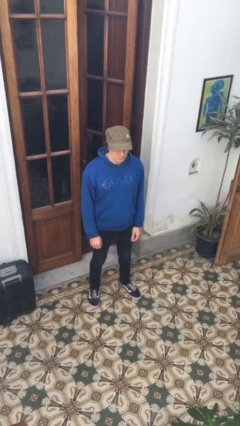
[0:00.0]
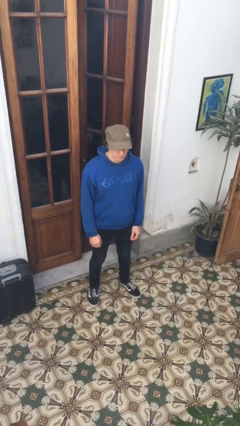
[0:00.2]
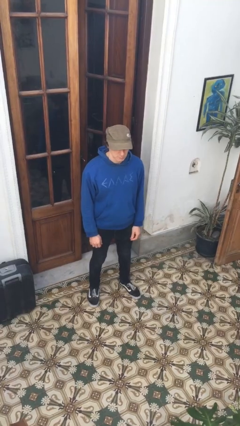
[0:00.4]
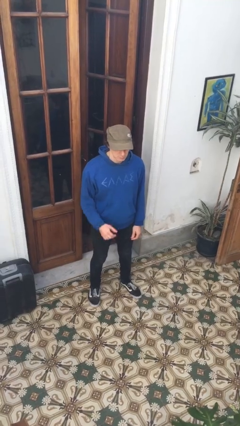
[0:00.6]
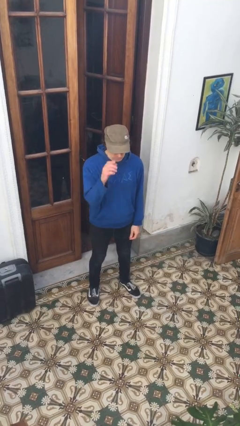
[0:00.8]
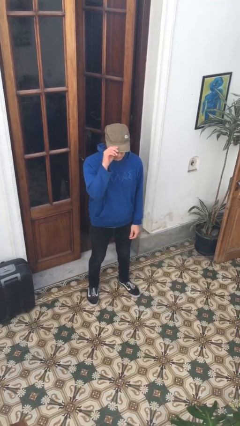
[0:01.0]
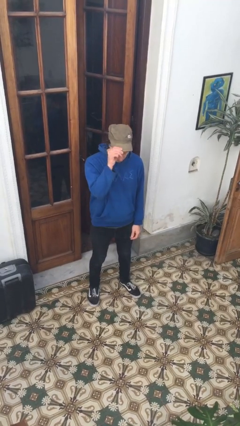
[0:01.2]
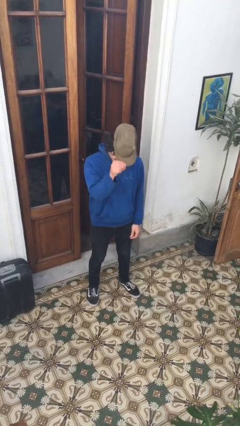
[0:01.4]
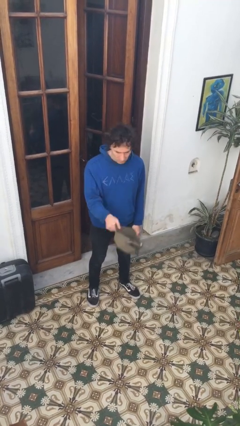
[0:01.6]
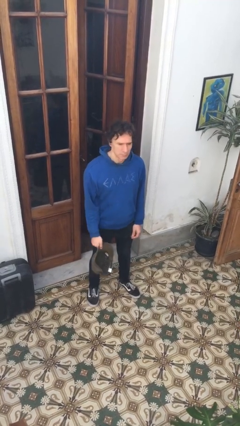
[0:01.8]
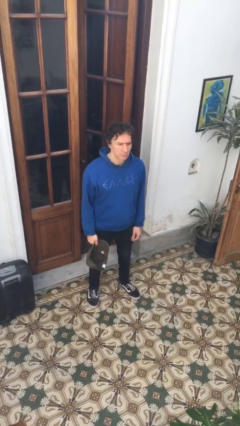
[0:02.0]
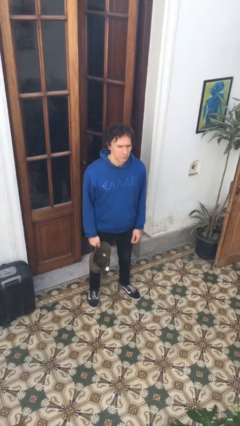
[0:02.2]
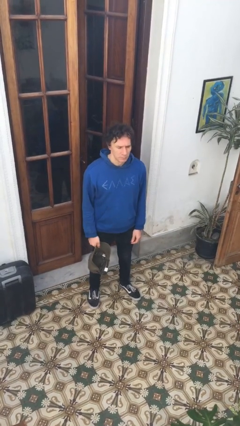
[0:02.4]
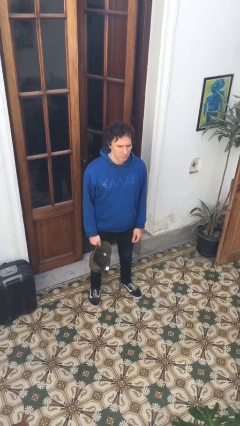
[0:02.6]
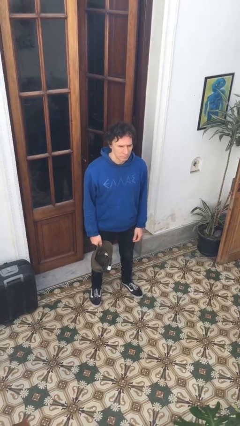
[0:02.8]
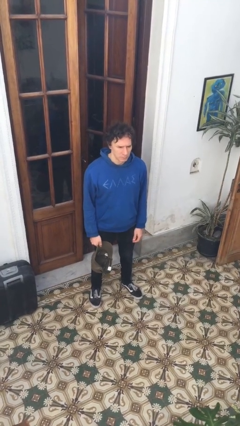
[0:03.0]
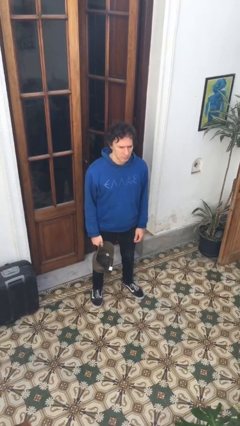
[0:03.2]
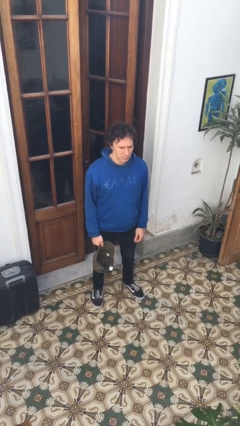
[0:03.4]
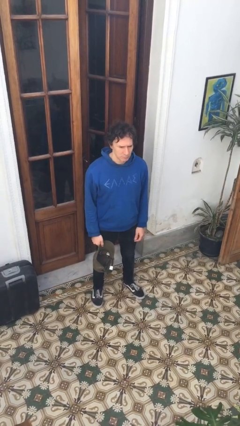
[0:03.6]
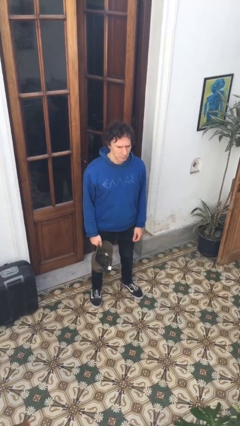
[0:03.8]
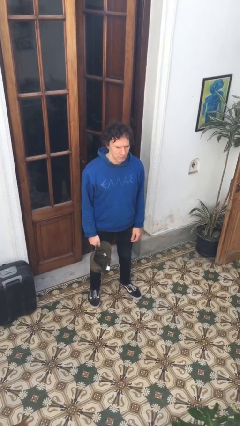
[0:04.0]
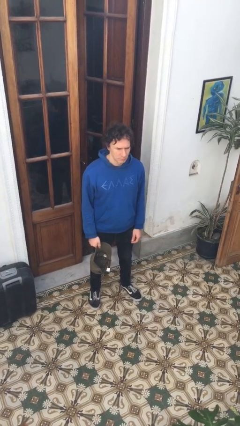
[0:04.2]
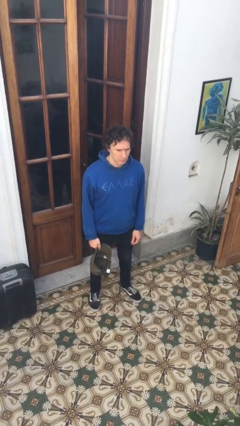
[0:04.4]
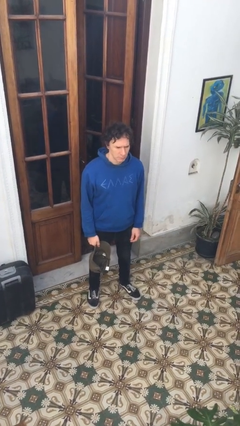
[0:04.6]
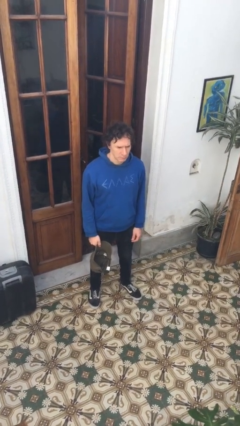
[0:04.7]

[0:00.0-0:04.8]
person takes off hat

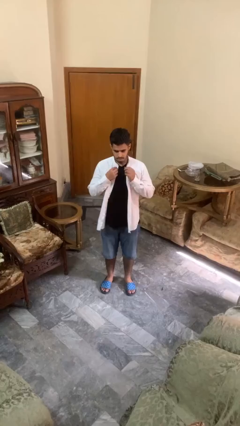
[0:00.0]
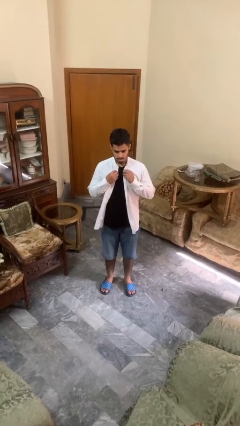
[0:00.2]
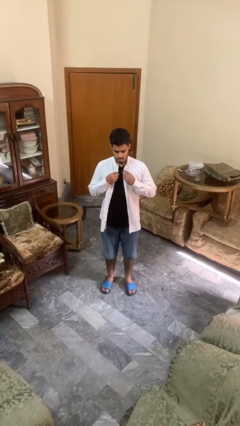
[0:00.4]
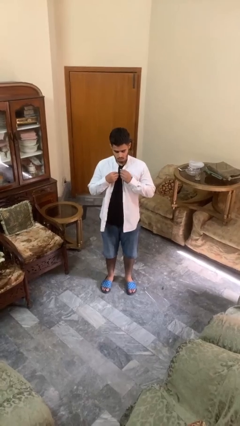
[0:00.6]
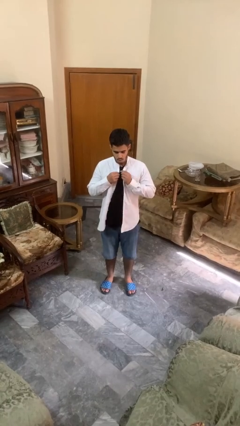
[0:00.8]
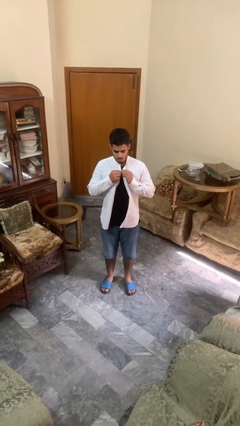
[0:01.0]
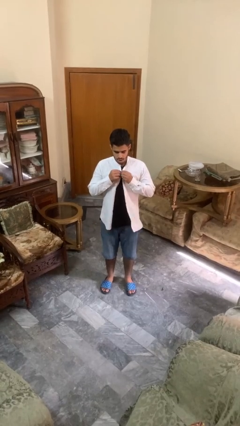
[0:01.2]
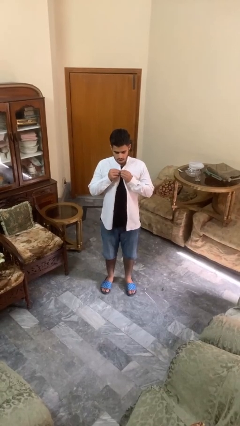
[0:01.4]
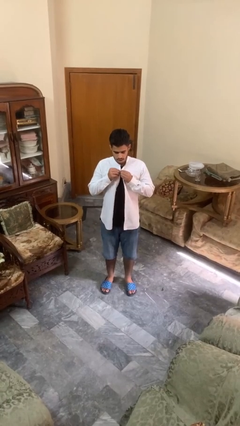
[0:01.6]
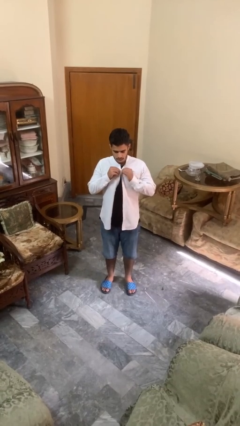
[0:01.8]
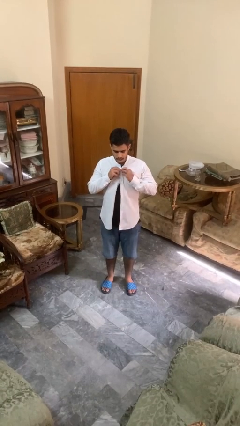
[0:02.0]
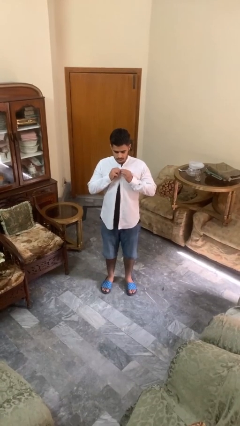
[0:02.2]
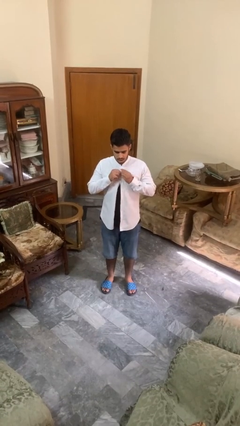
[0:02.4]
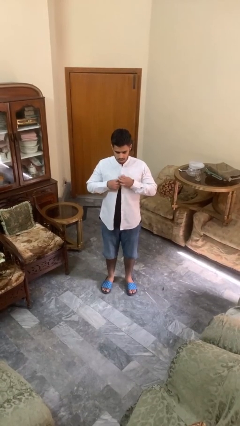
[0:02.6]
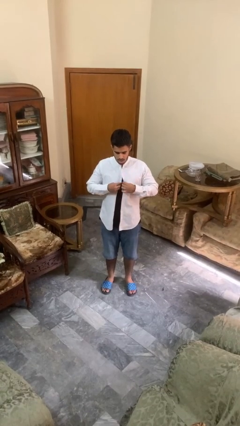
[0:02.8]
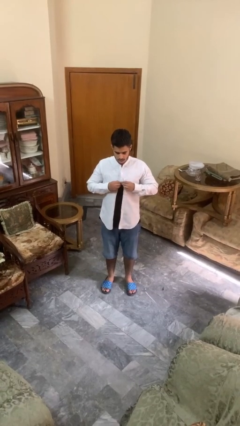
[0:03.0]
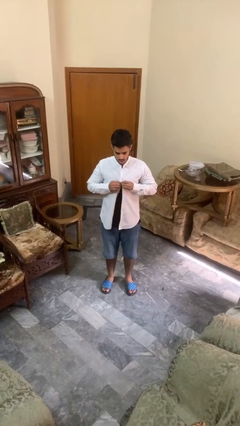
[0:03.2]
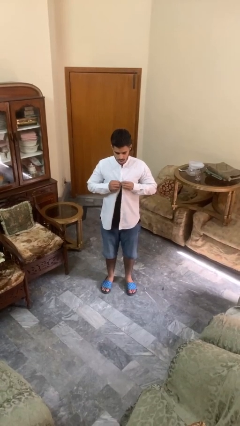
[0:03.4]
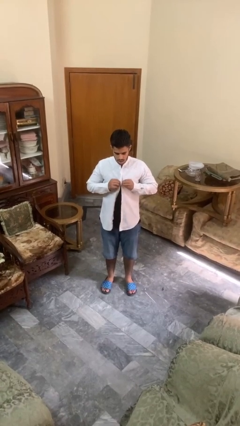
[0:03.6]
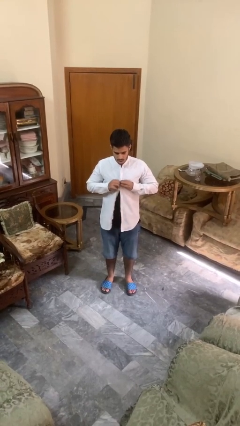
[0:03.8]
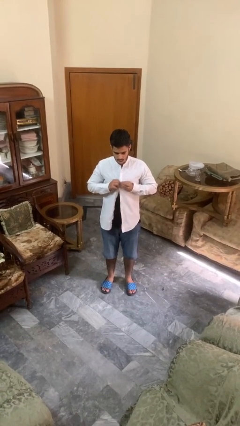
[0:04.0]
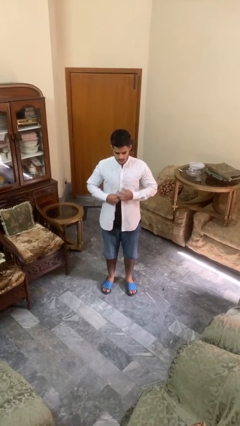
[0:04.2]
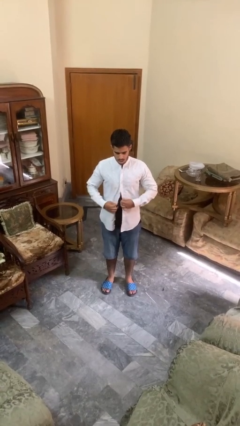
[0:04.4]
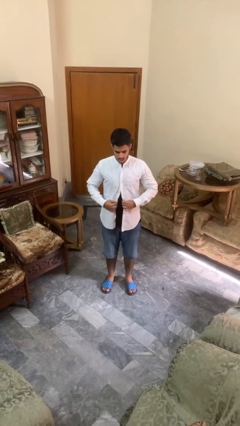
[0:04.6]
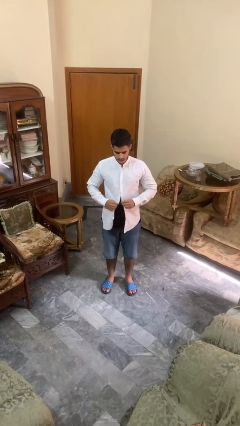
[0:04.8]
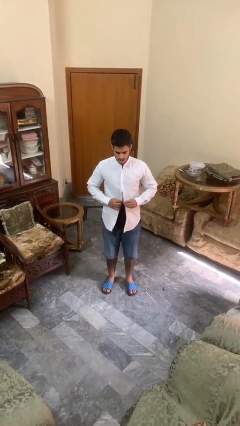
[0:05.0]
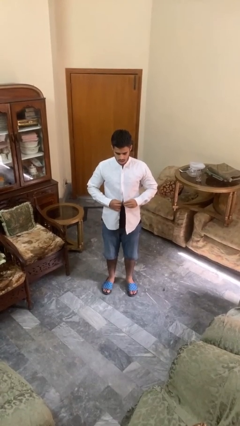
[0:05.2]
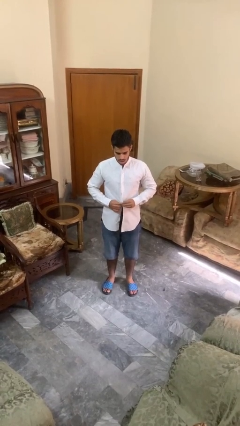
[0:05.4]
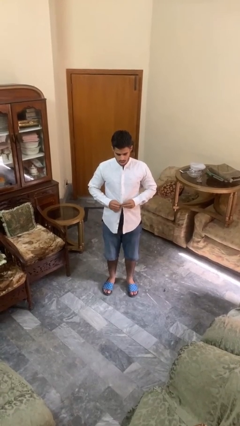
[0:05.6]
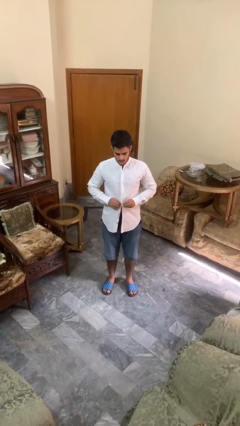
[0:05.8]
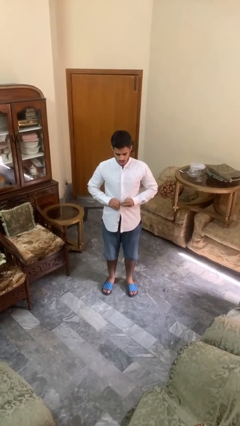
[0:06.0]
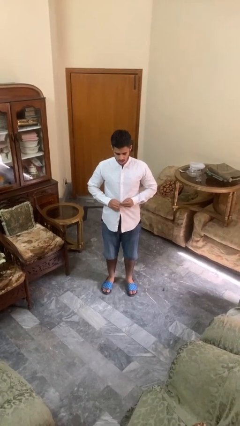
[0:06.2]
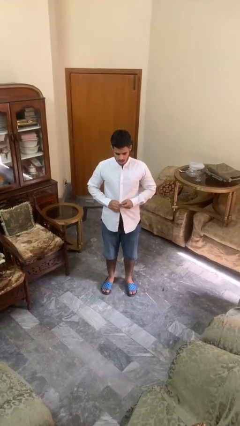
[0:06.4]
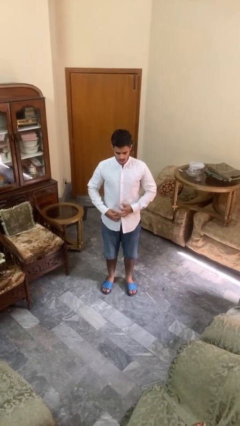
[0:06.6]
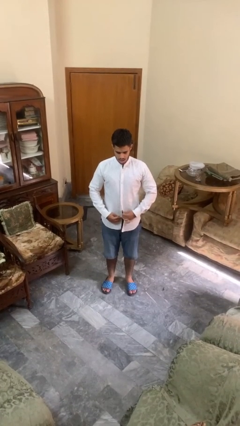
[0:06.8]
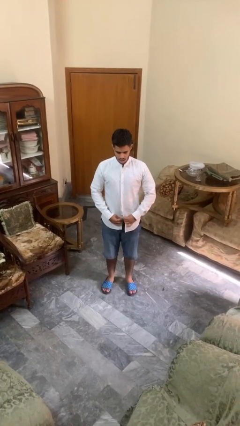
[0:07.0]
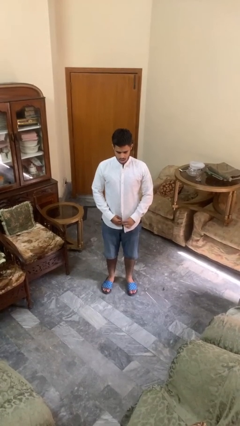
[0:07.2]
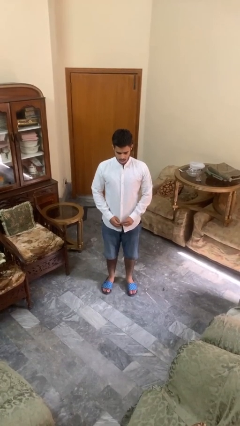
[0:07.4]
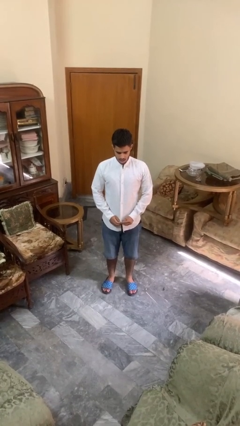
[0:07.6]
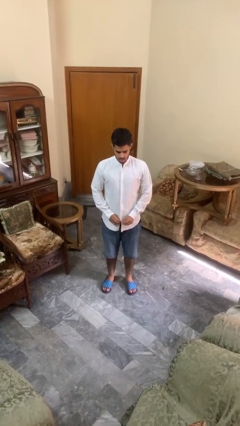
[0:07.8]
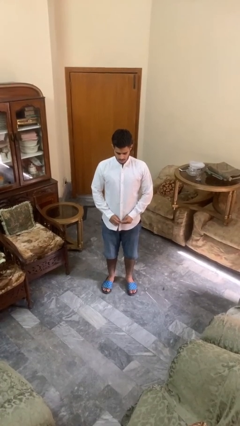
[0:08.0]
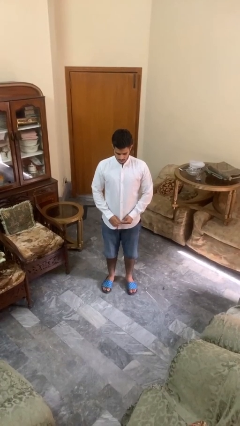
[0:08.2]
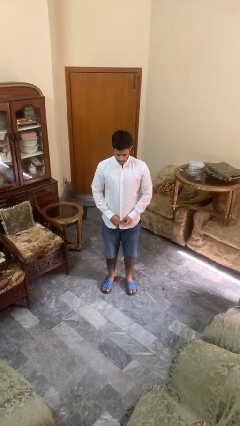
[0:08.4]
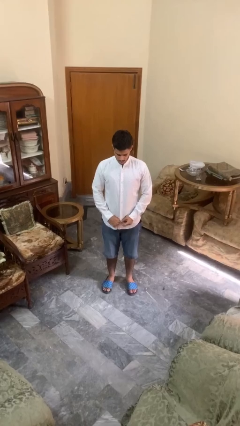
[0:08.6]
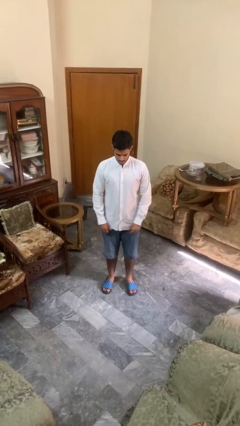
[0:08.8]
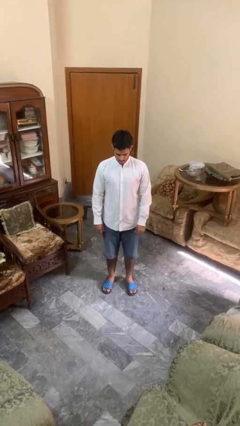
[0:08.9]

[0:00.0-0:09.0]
person buttons shirt

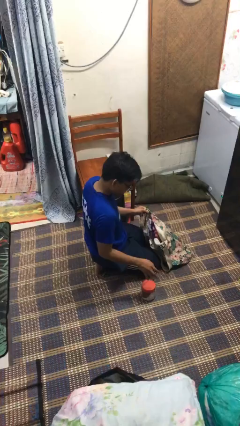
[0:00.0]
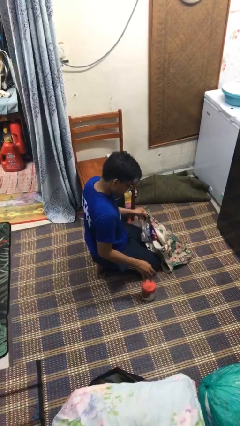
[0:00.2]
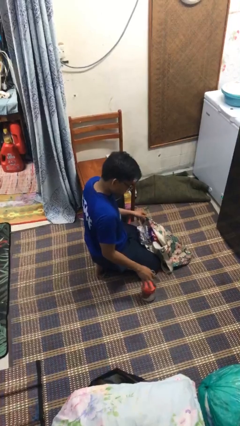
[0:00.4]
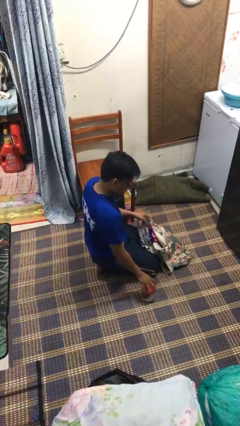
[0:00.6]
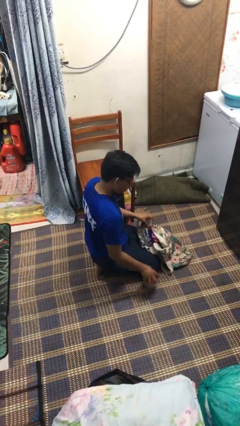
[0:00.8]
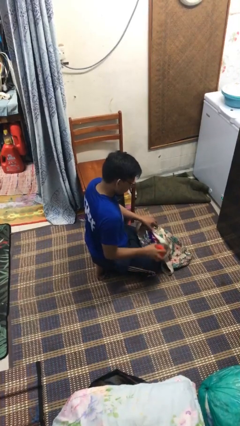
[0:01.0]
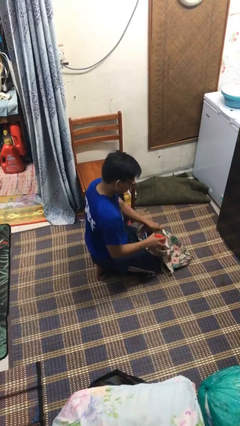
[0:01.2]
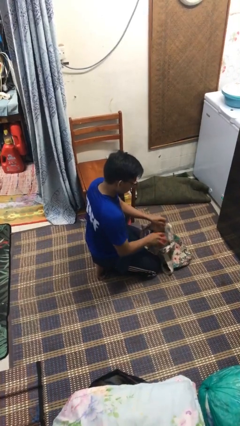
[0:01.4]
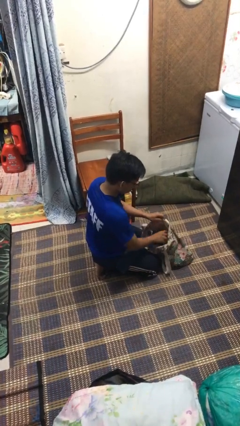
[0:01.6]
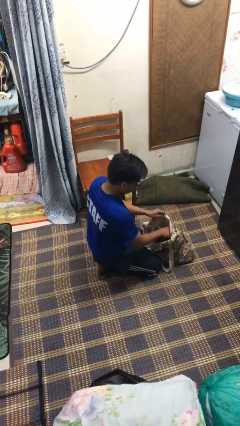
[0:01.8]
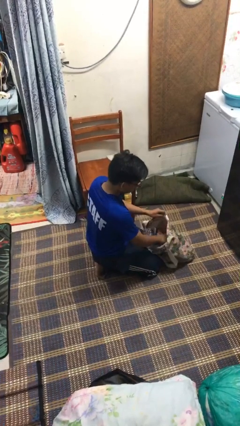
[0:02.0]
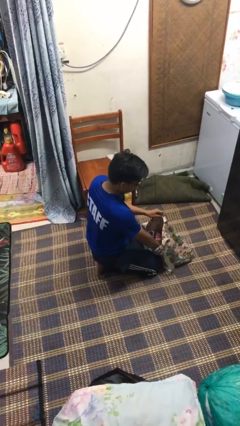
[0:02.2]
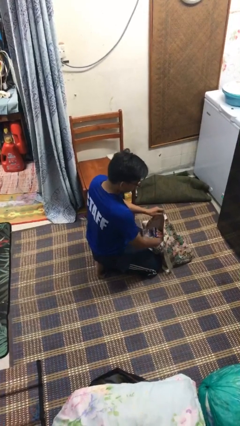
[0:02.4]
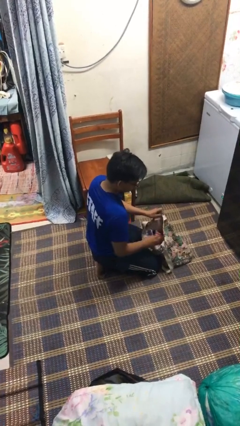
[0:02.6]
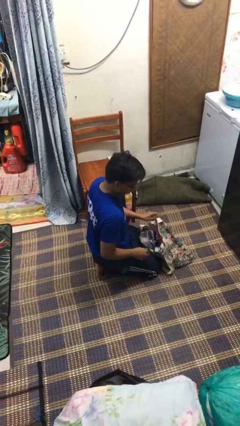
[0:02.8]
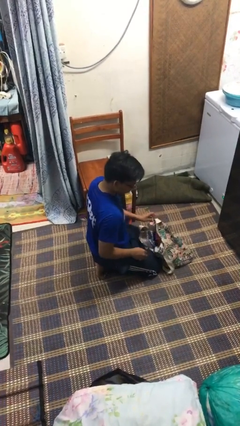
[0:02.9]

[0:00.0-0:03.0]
person puts object into bag

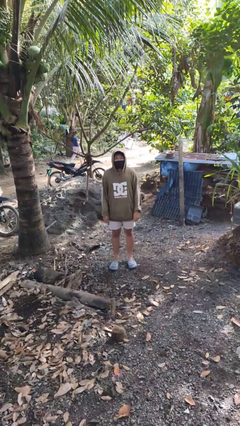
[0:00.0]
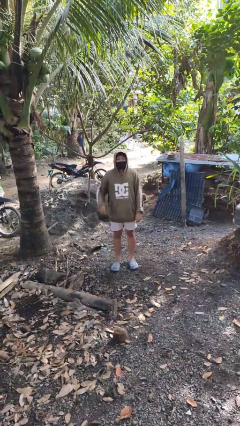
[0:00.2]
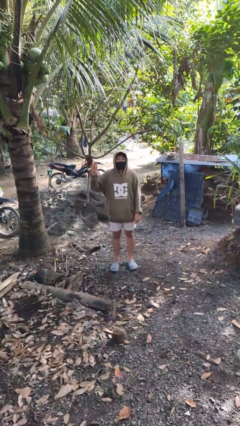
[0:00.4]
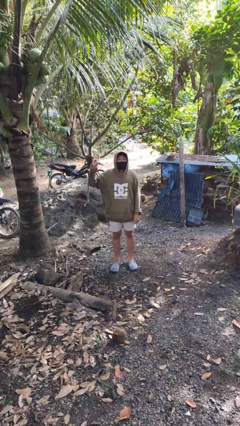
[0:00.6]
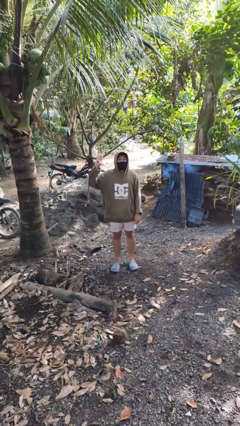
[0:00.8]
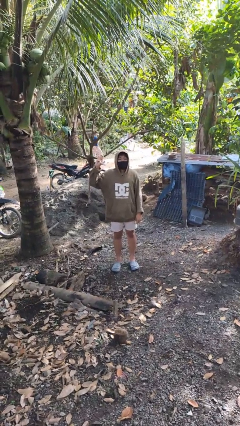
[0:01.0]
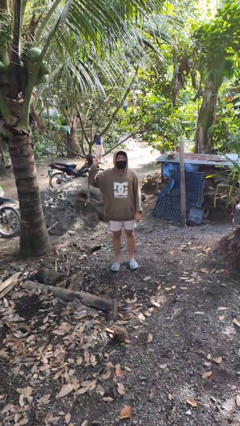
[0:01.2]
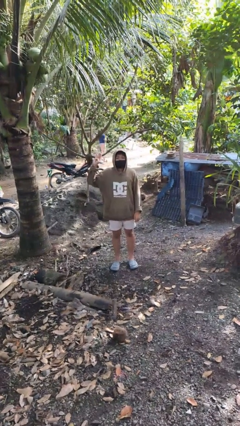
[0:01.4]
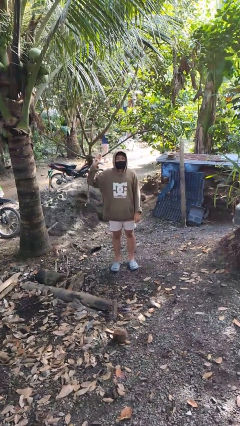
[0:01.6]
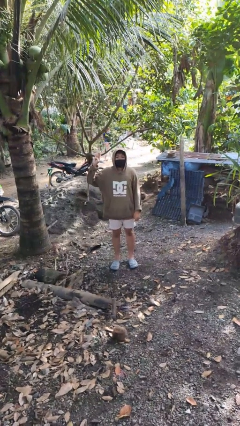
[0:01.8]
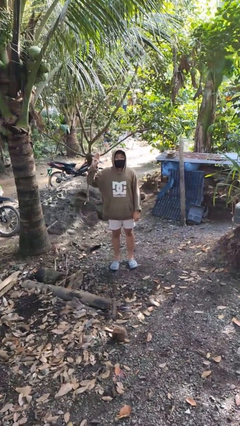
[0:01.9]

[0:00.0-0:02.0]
person gestures number four
